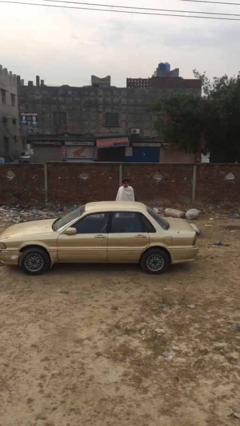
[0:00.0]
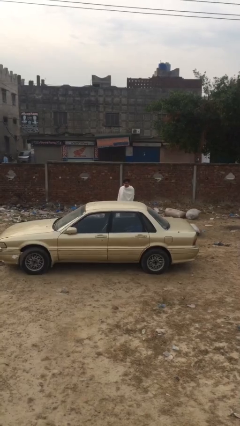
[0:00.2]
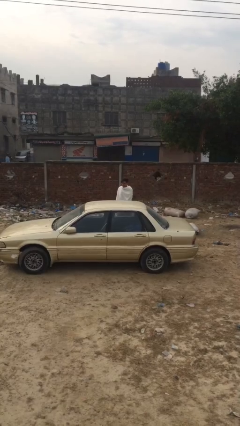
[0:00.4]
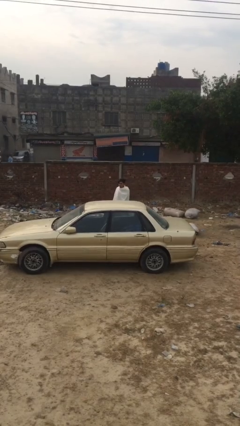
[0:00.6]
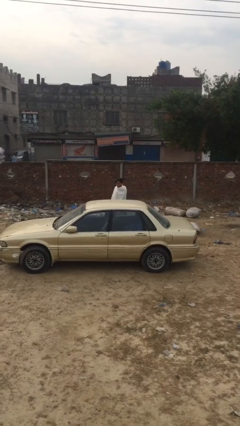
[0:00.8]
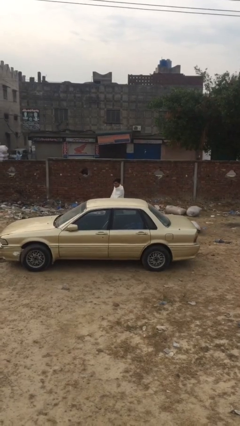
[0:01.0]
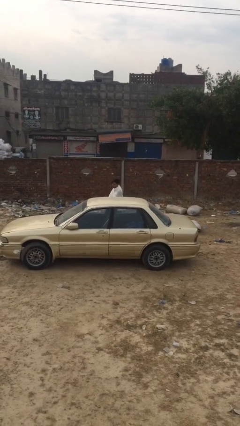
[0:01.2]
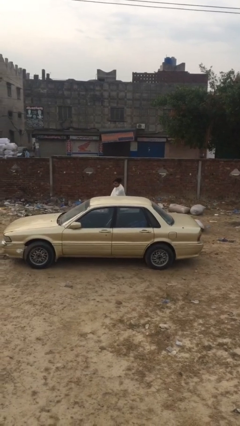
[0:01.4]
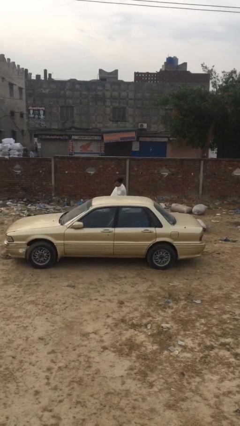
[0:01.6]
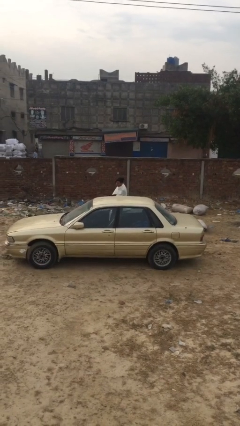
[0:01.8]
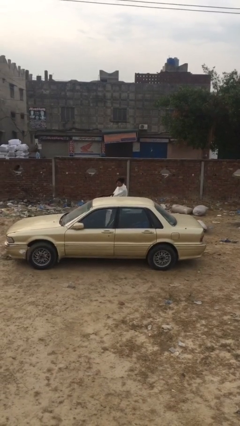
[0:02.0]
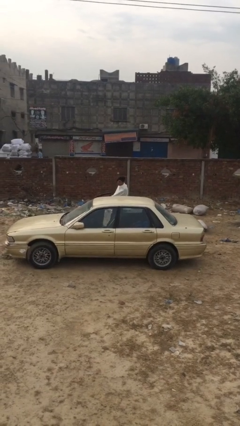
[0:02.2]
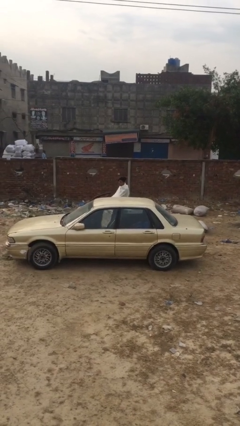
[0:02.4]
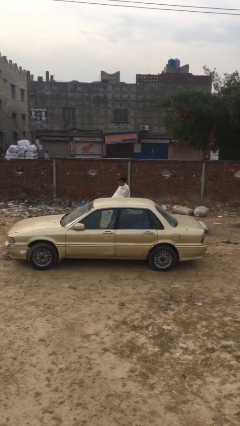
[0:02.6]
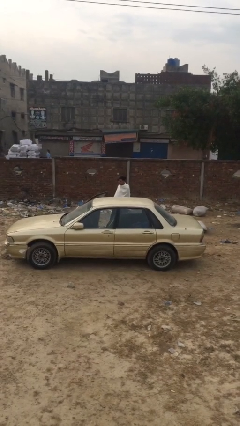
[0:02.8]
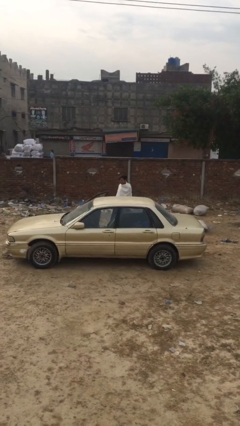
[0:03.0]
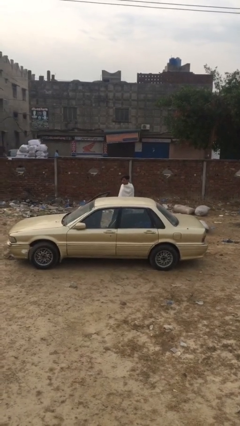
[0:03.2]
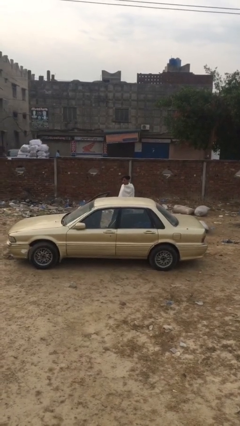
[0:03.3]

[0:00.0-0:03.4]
person opens car door

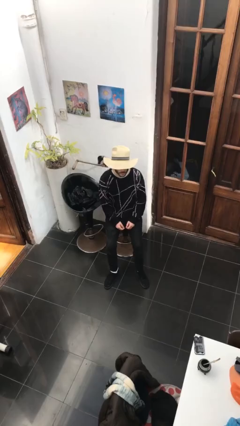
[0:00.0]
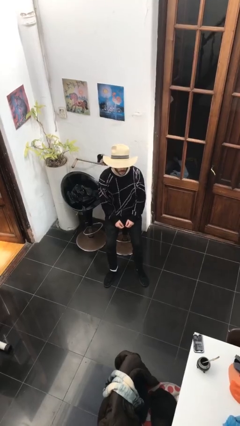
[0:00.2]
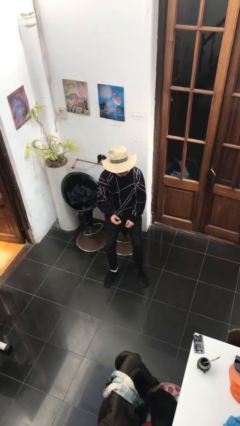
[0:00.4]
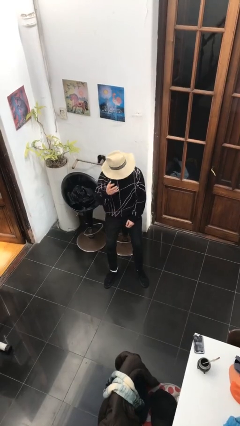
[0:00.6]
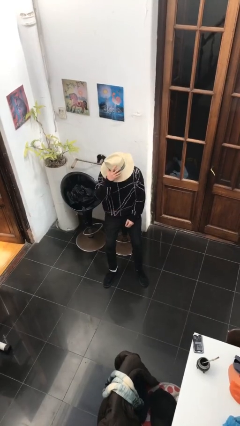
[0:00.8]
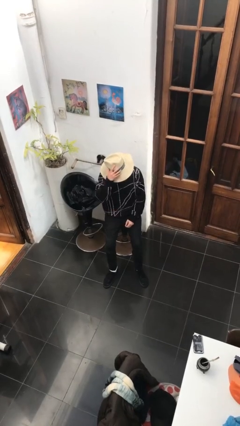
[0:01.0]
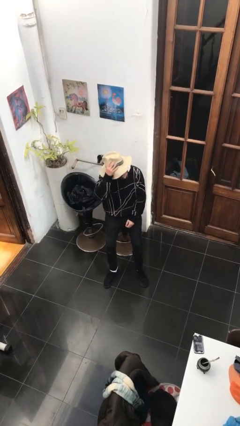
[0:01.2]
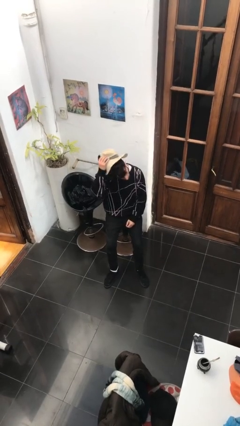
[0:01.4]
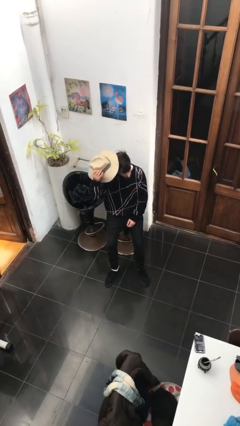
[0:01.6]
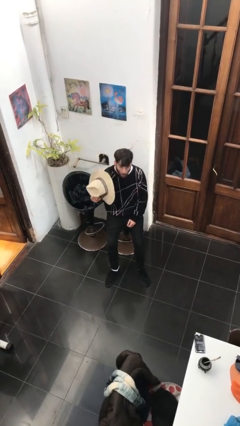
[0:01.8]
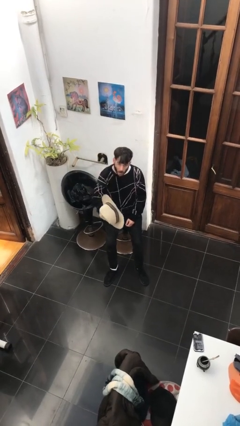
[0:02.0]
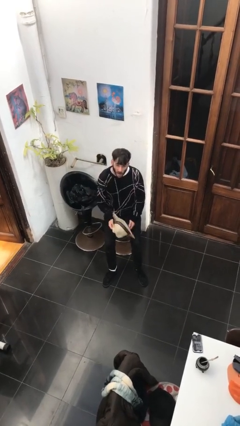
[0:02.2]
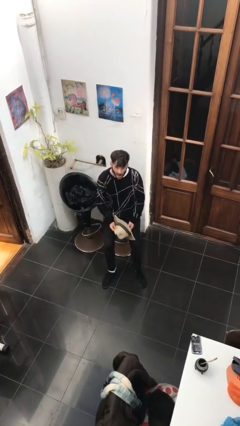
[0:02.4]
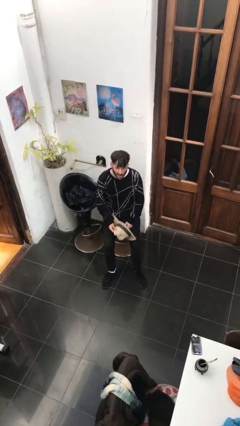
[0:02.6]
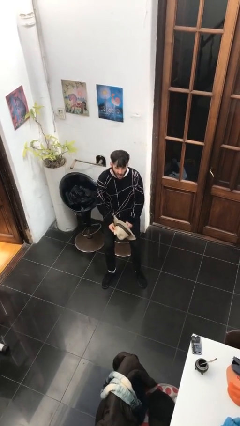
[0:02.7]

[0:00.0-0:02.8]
person takes off hat

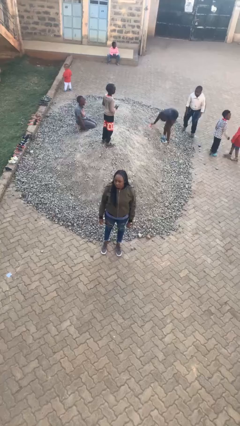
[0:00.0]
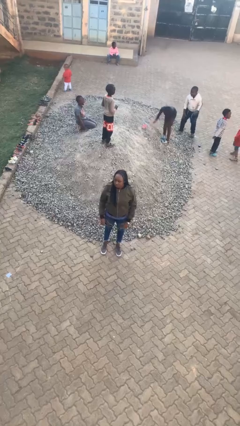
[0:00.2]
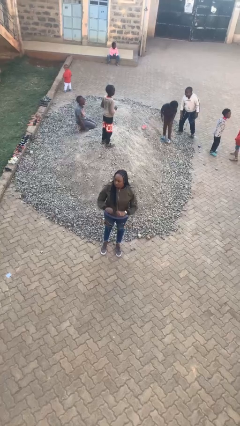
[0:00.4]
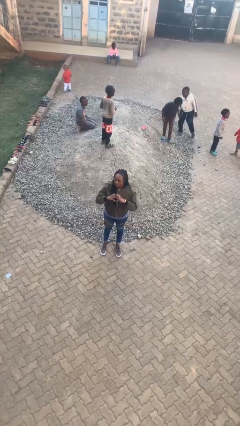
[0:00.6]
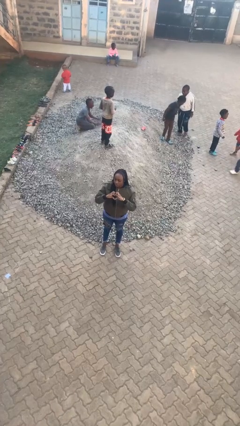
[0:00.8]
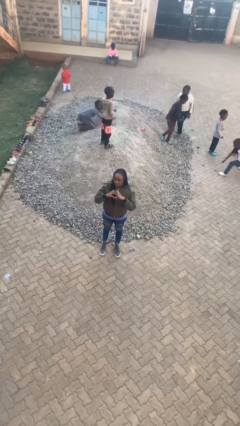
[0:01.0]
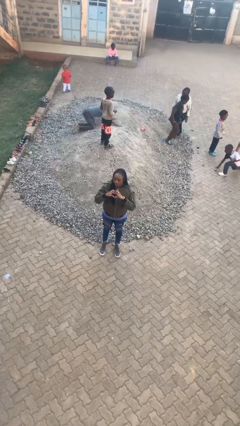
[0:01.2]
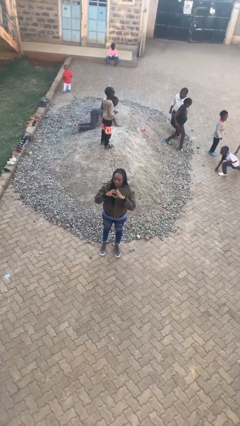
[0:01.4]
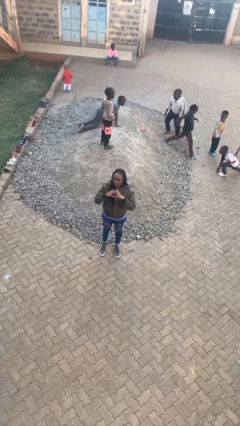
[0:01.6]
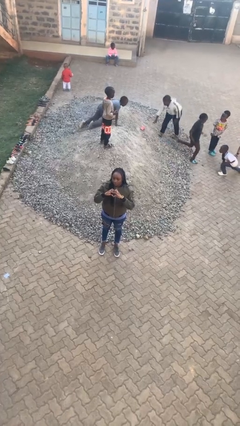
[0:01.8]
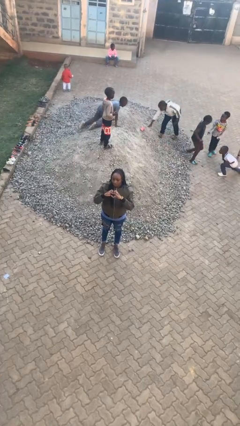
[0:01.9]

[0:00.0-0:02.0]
person gestures heart

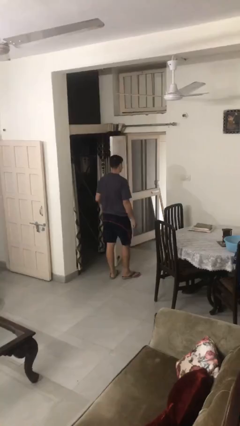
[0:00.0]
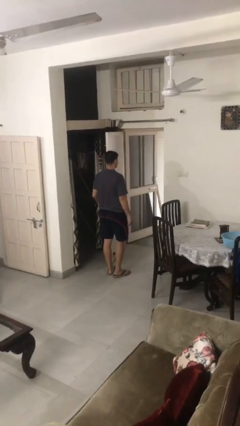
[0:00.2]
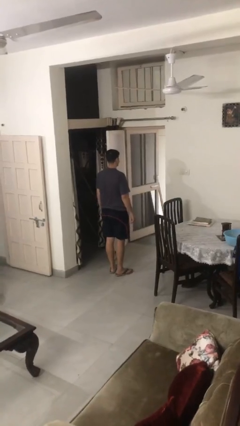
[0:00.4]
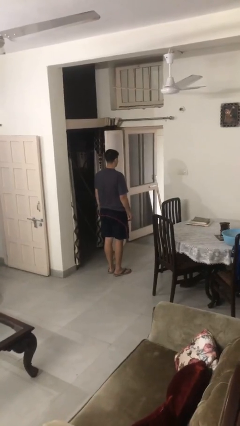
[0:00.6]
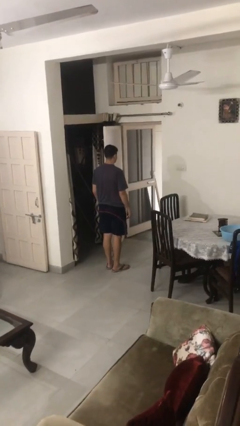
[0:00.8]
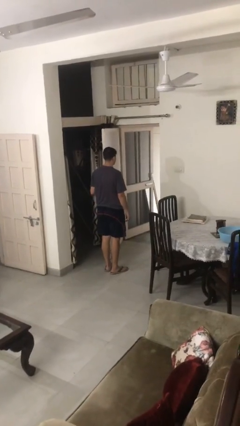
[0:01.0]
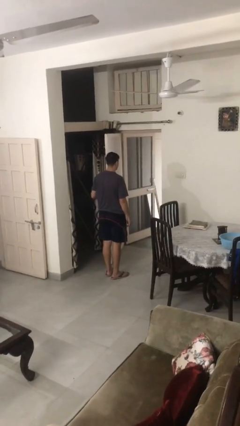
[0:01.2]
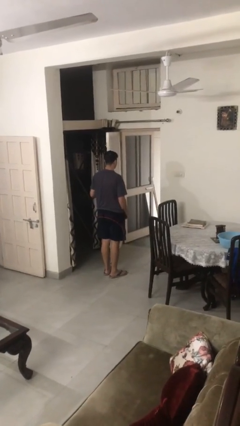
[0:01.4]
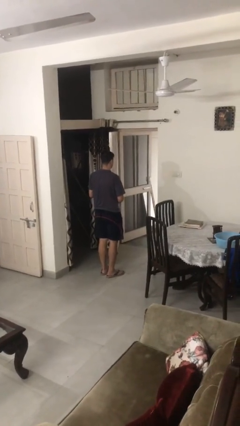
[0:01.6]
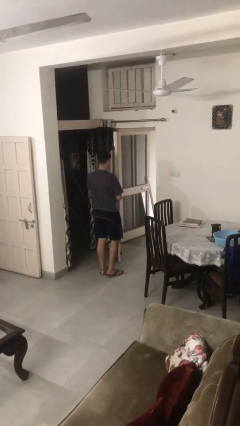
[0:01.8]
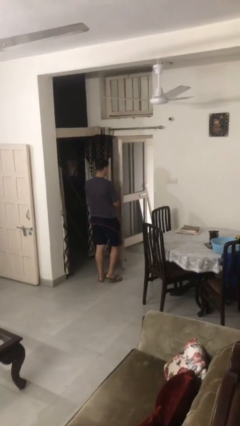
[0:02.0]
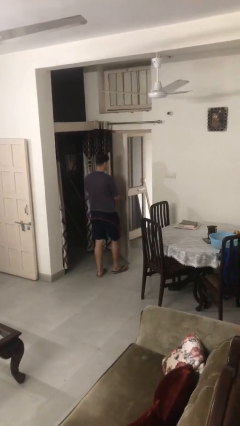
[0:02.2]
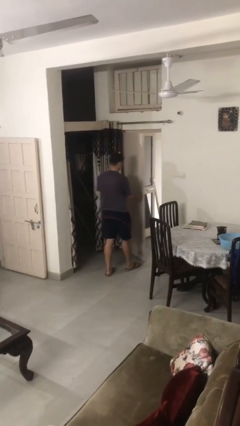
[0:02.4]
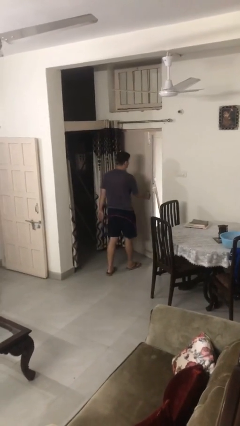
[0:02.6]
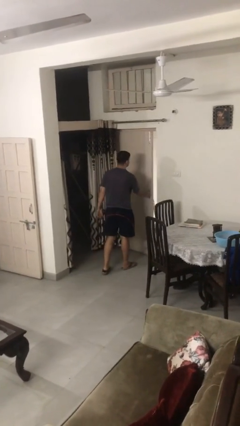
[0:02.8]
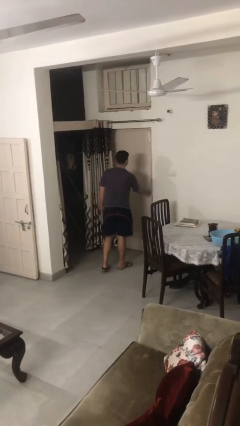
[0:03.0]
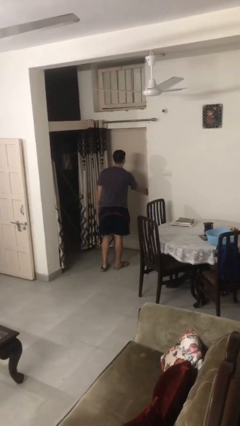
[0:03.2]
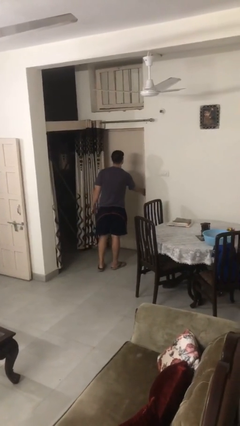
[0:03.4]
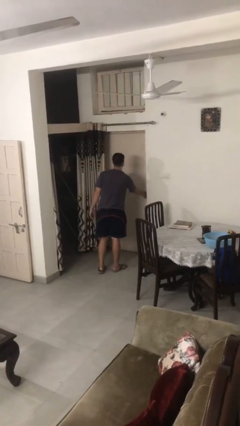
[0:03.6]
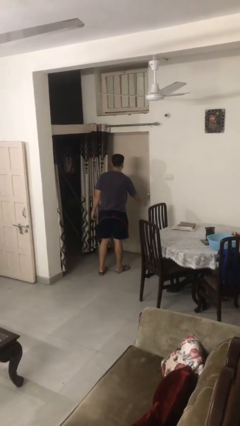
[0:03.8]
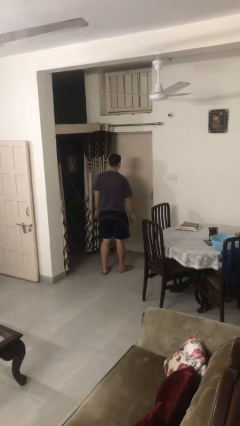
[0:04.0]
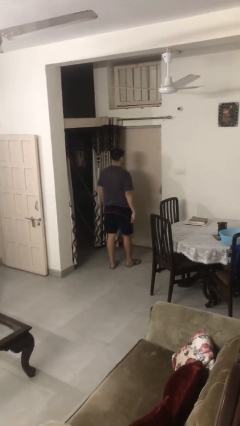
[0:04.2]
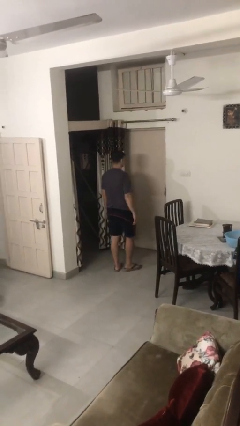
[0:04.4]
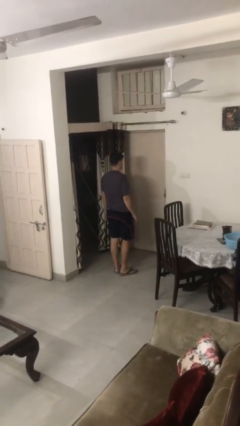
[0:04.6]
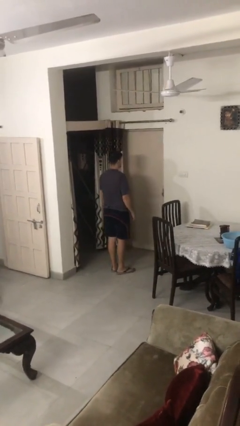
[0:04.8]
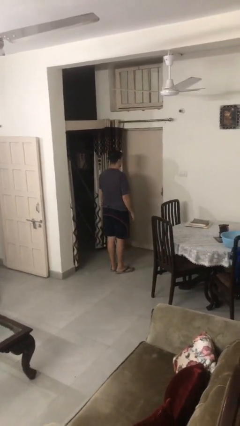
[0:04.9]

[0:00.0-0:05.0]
person closes facility door

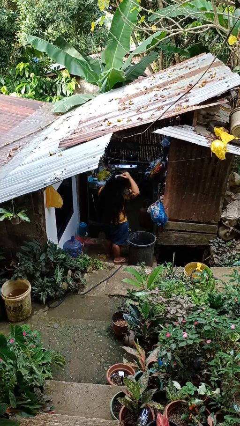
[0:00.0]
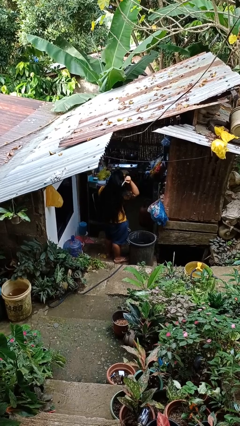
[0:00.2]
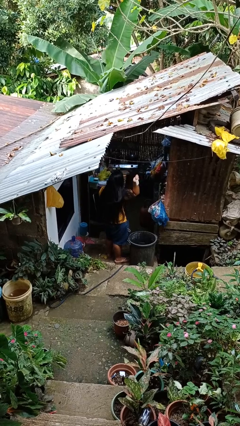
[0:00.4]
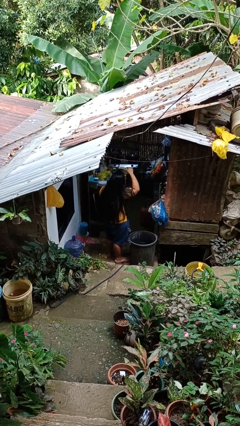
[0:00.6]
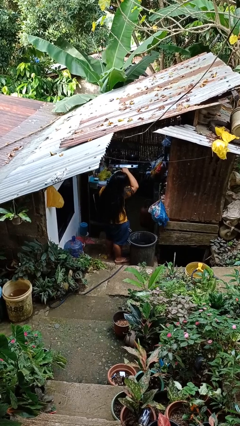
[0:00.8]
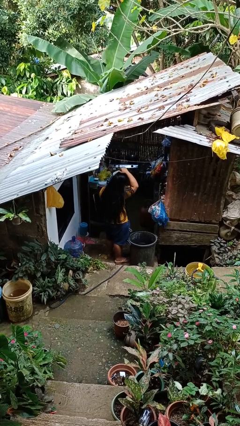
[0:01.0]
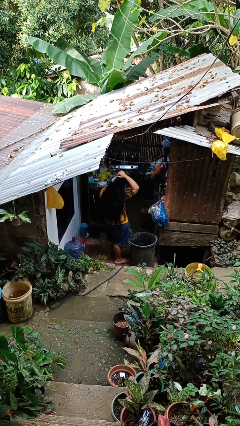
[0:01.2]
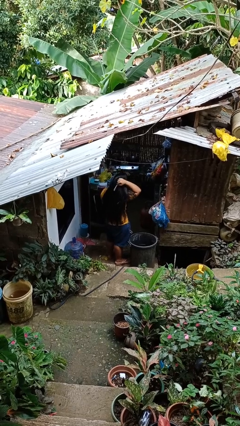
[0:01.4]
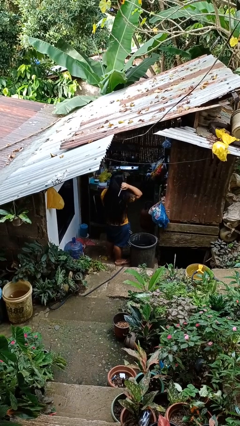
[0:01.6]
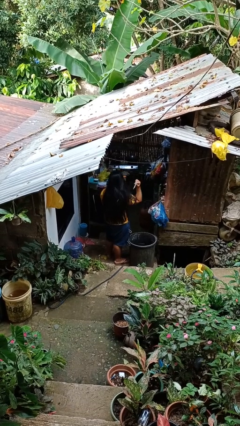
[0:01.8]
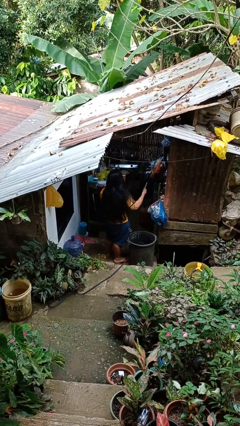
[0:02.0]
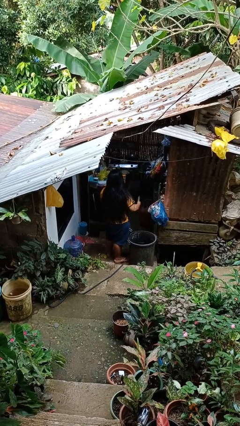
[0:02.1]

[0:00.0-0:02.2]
person brushes hair

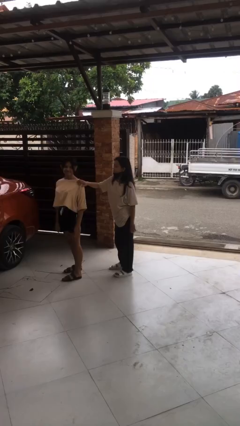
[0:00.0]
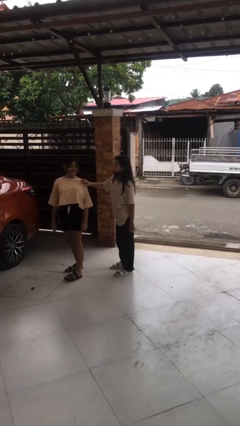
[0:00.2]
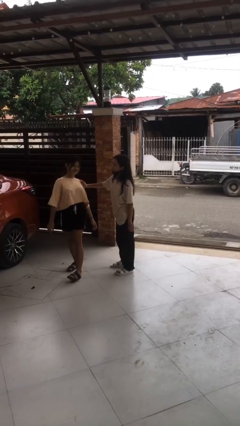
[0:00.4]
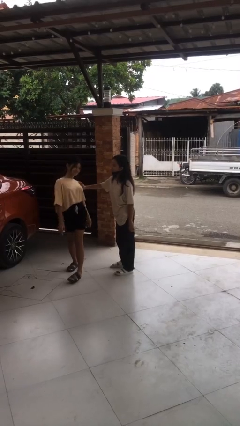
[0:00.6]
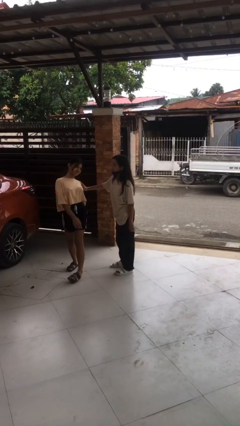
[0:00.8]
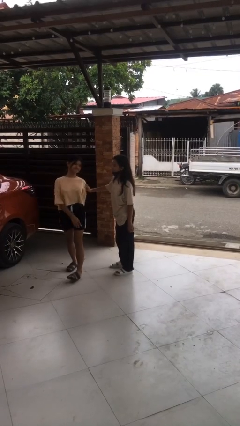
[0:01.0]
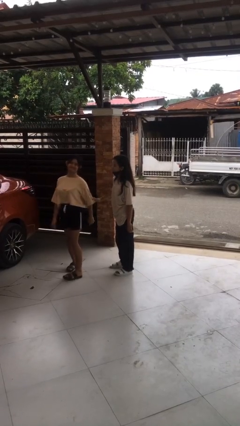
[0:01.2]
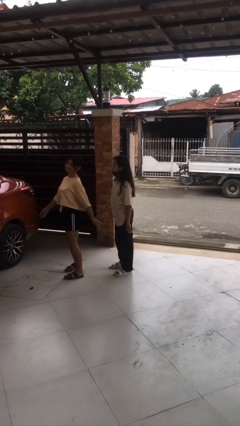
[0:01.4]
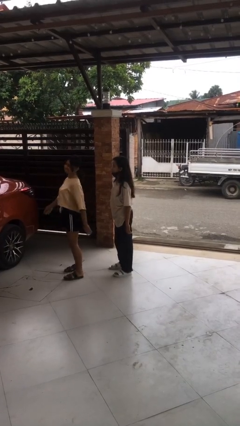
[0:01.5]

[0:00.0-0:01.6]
person spins person around

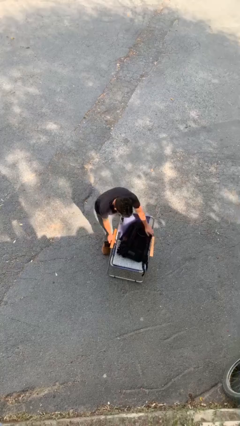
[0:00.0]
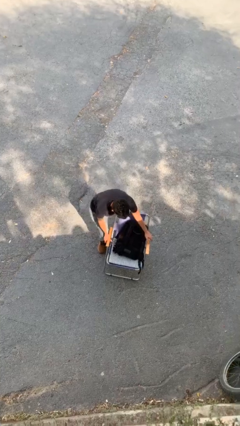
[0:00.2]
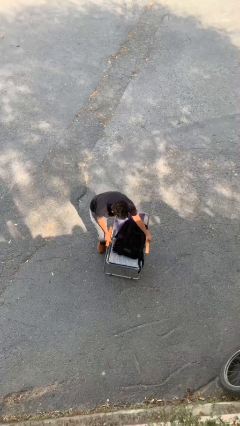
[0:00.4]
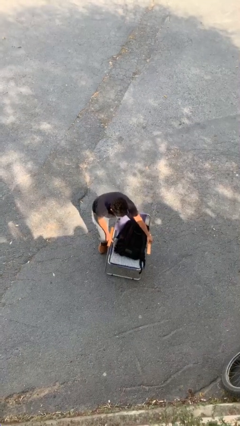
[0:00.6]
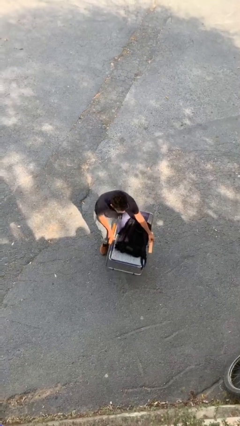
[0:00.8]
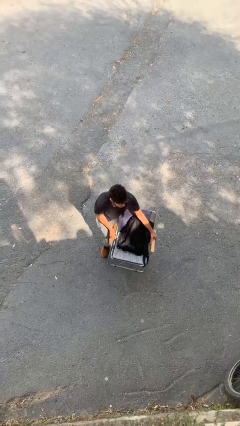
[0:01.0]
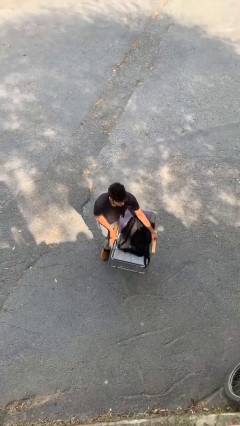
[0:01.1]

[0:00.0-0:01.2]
person picks up object from floor
